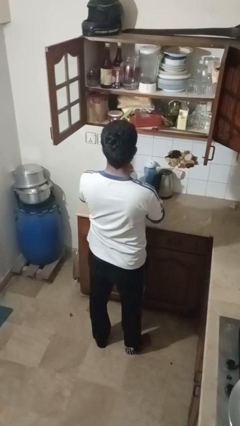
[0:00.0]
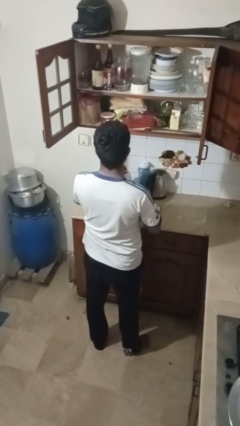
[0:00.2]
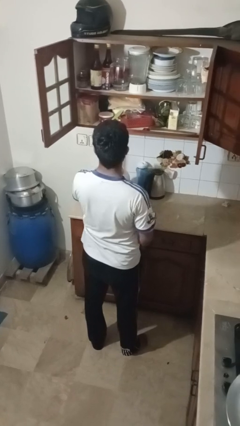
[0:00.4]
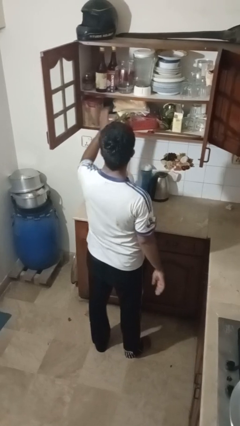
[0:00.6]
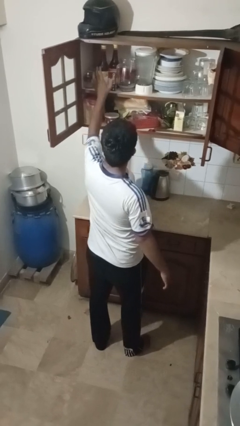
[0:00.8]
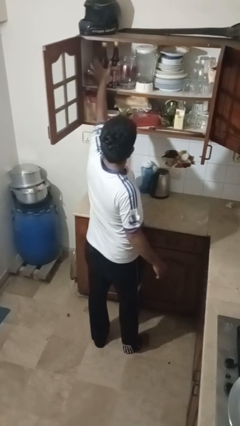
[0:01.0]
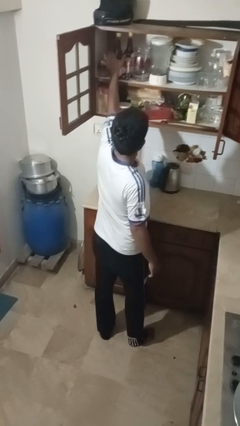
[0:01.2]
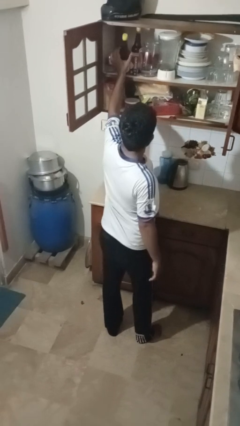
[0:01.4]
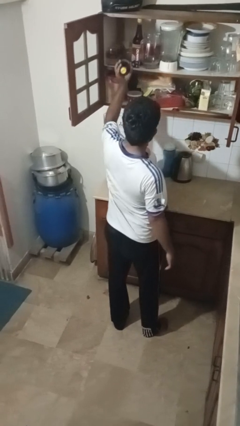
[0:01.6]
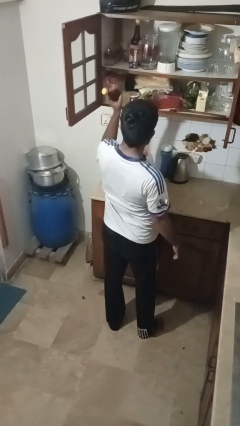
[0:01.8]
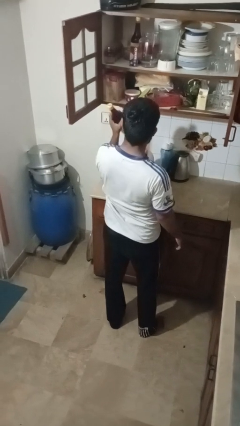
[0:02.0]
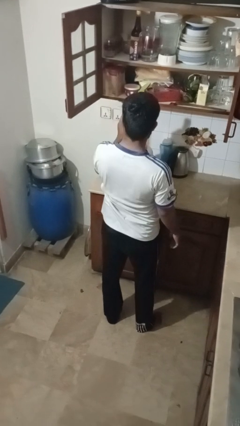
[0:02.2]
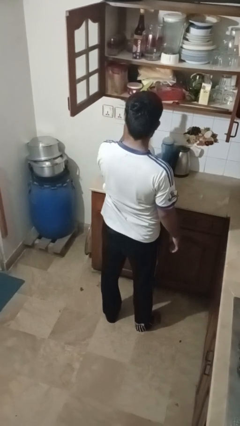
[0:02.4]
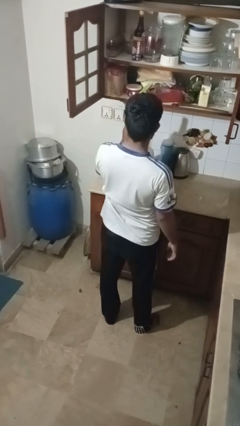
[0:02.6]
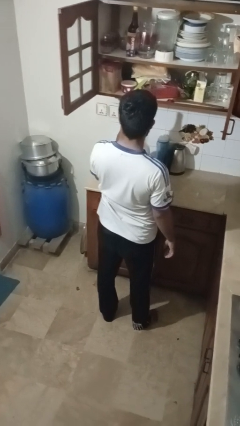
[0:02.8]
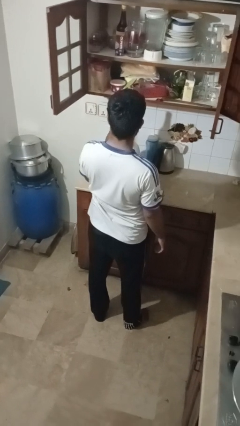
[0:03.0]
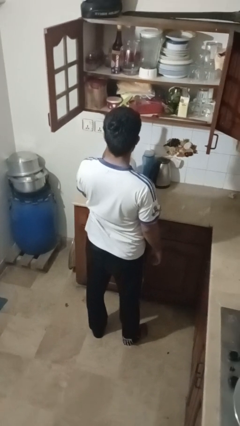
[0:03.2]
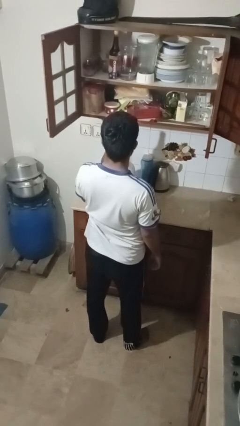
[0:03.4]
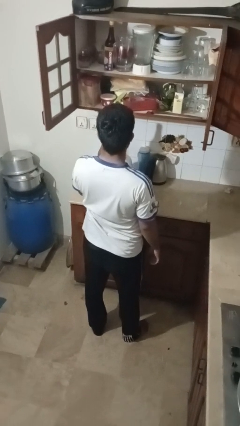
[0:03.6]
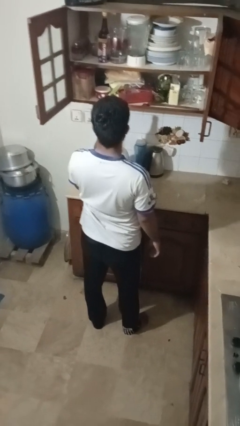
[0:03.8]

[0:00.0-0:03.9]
person takes object from cabinet

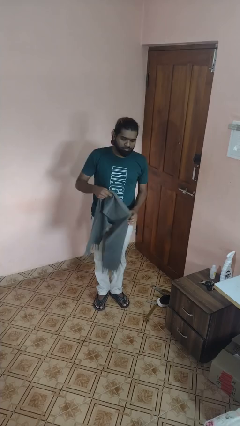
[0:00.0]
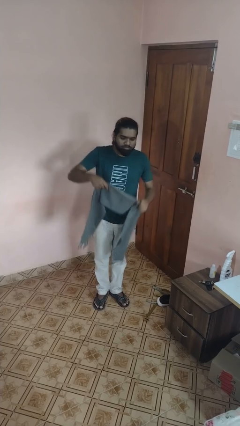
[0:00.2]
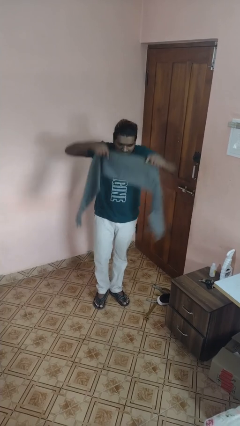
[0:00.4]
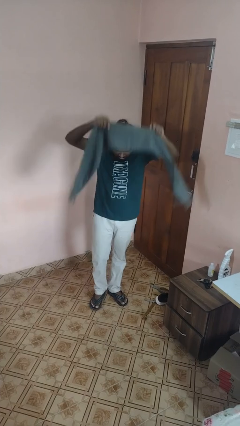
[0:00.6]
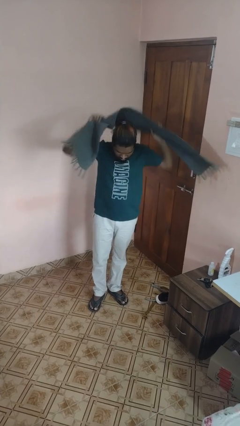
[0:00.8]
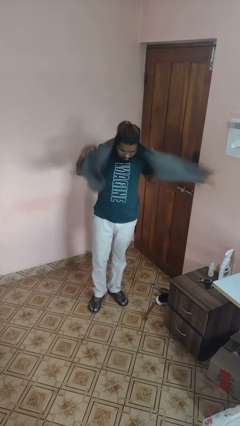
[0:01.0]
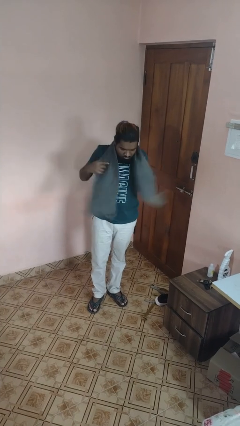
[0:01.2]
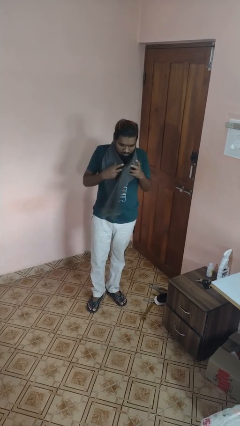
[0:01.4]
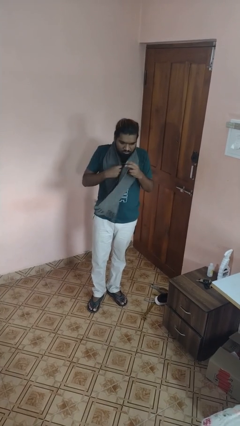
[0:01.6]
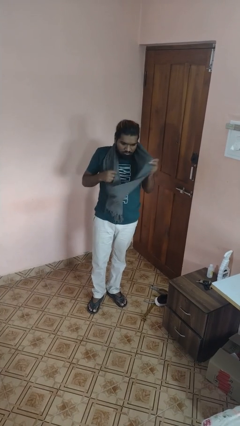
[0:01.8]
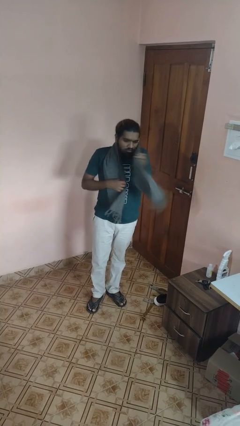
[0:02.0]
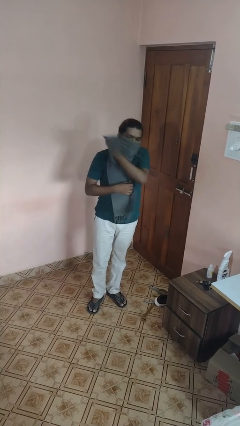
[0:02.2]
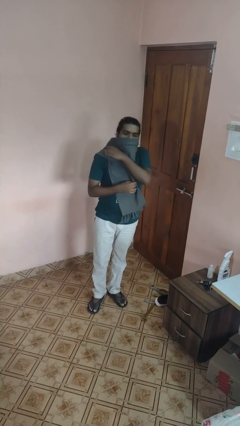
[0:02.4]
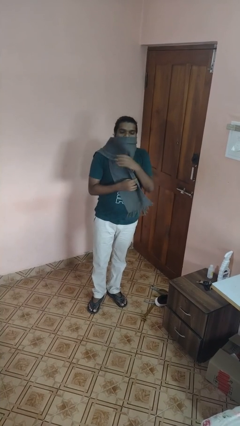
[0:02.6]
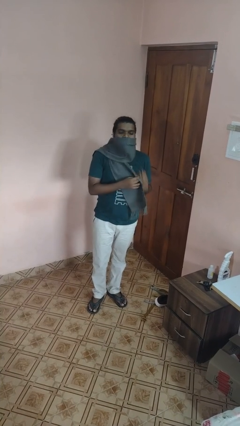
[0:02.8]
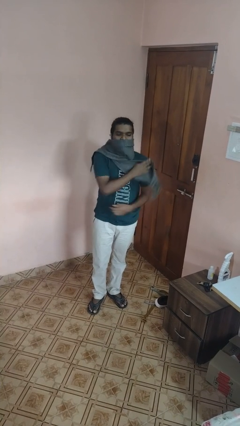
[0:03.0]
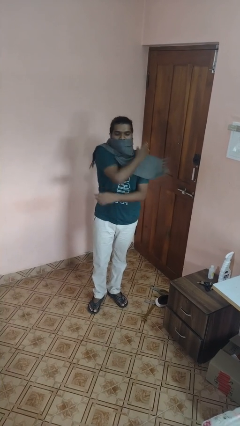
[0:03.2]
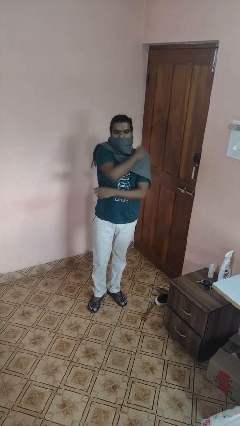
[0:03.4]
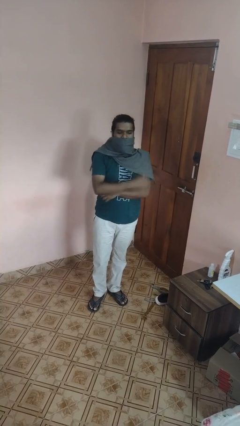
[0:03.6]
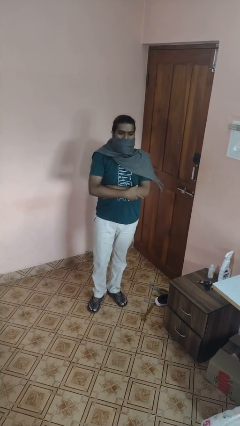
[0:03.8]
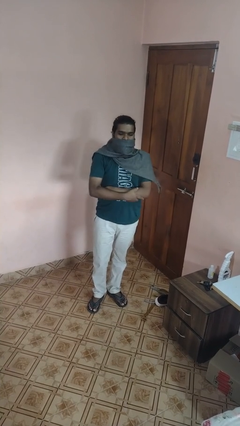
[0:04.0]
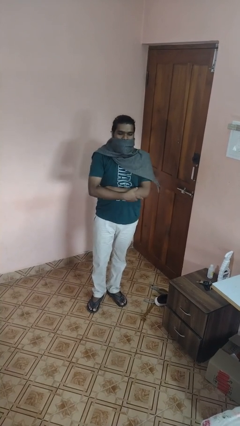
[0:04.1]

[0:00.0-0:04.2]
person puts on scarf

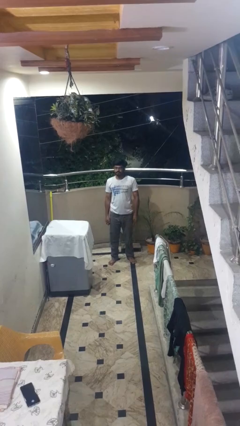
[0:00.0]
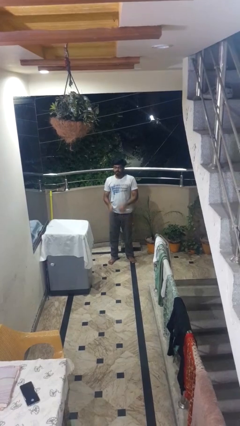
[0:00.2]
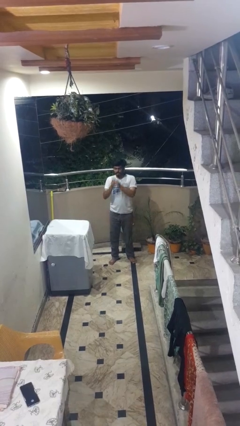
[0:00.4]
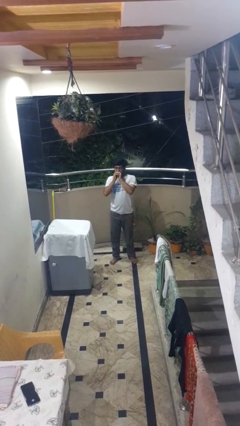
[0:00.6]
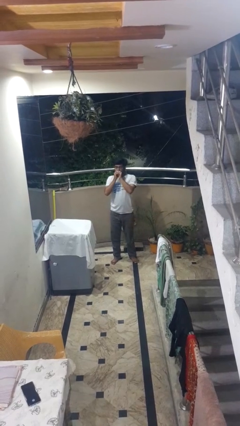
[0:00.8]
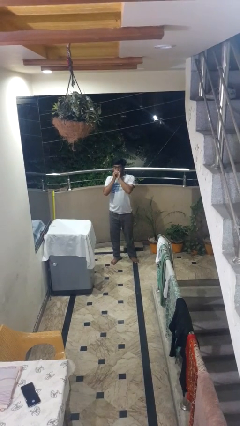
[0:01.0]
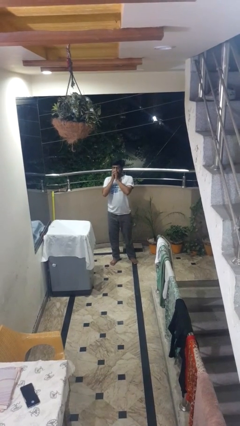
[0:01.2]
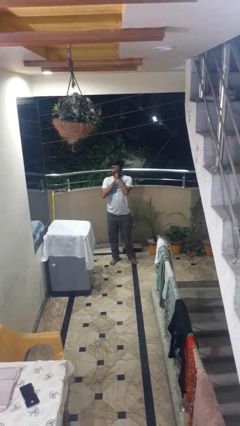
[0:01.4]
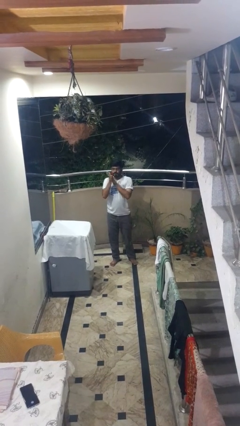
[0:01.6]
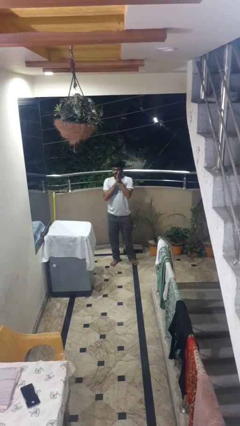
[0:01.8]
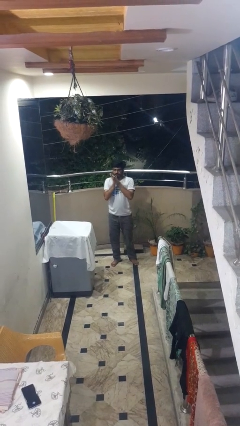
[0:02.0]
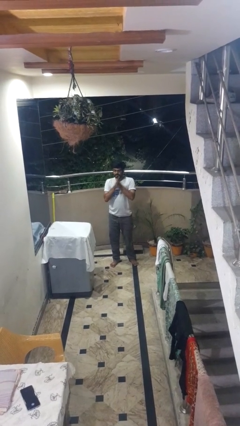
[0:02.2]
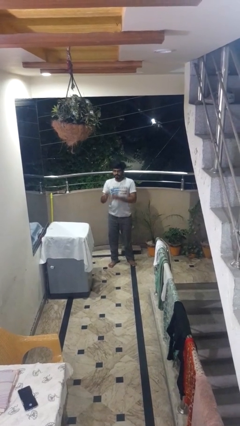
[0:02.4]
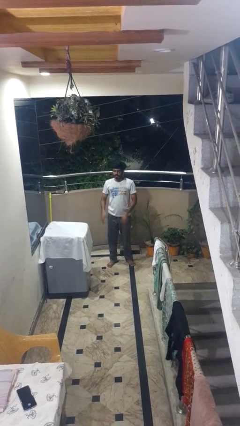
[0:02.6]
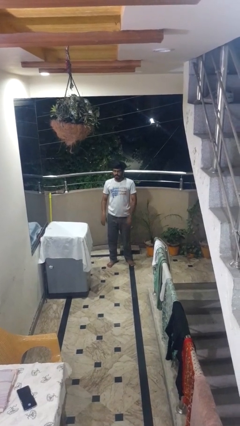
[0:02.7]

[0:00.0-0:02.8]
person blows into hands

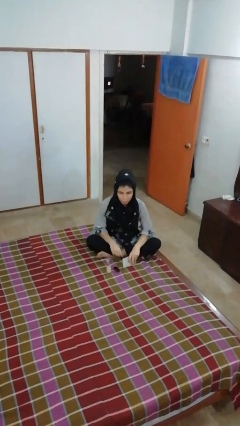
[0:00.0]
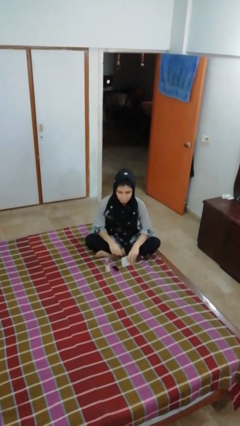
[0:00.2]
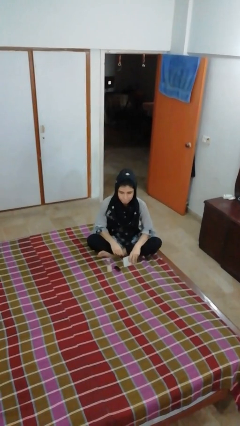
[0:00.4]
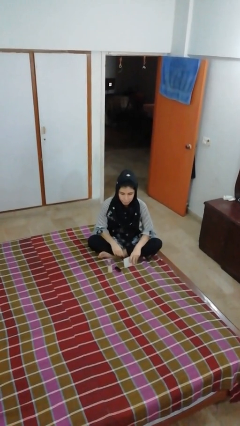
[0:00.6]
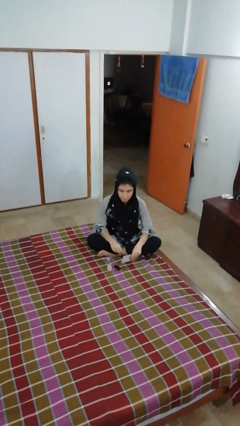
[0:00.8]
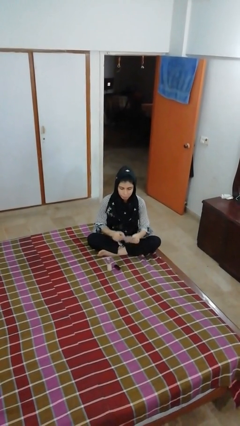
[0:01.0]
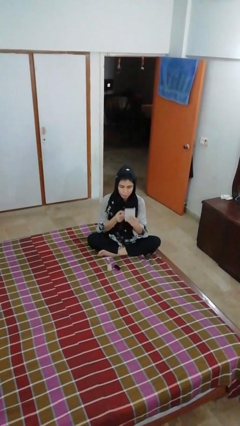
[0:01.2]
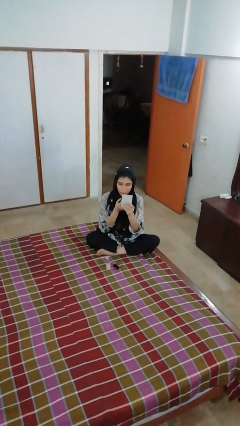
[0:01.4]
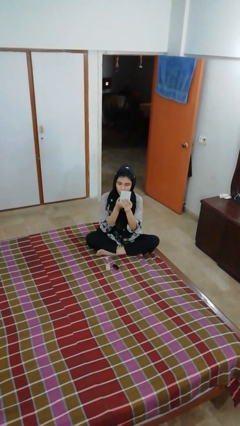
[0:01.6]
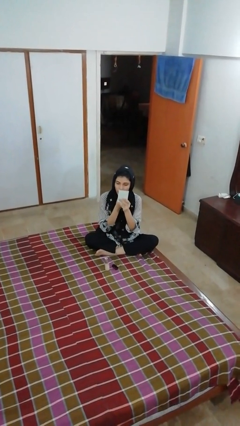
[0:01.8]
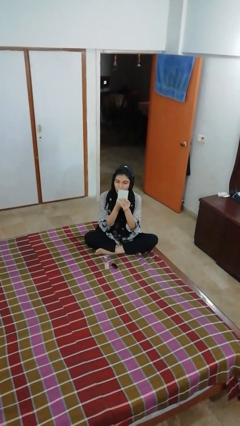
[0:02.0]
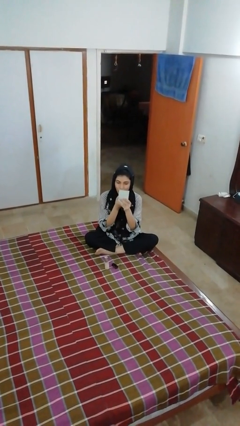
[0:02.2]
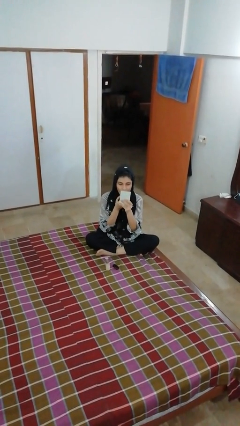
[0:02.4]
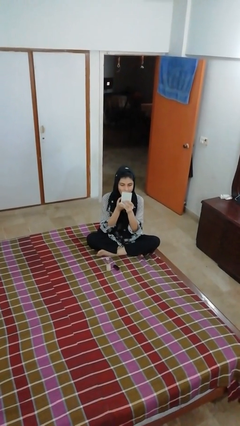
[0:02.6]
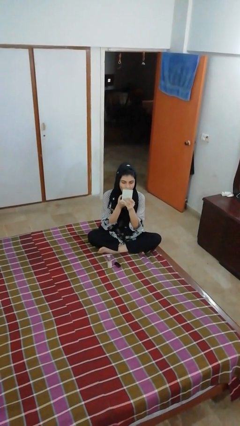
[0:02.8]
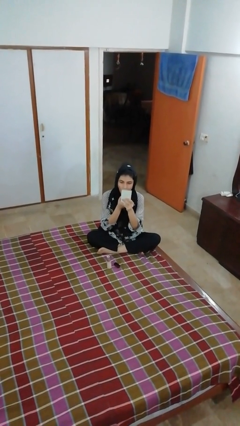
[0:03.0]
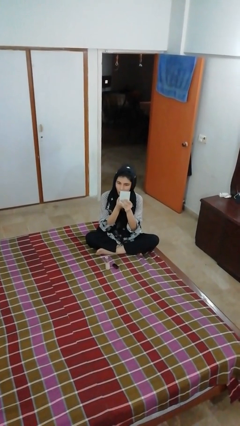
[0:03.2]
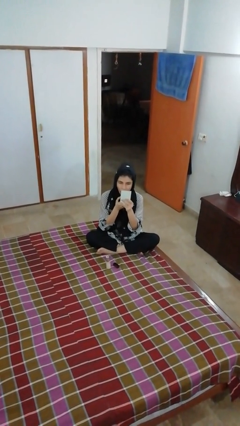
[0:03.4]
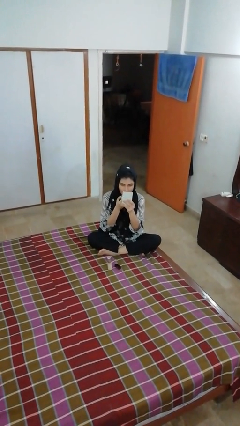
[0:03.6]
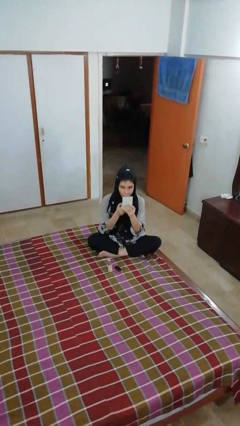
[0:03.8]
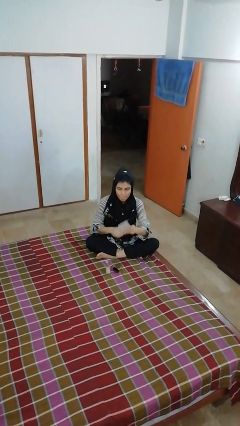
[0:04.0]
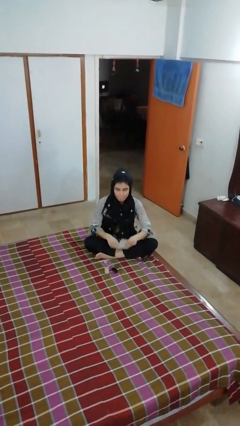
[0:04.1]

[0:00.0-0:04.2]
person applies lip makeup

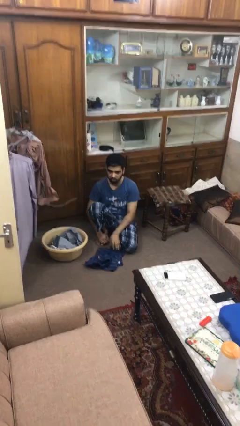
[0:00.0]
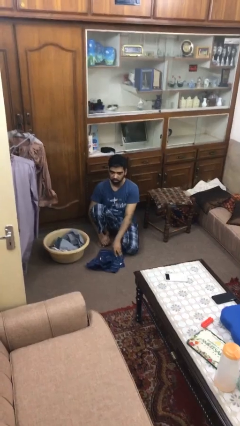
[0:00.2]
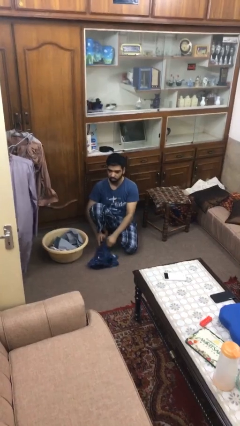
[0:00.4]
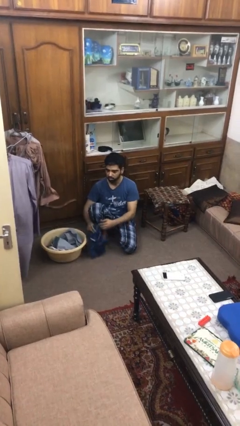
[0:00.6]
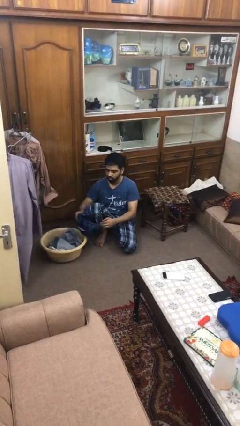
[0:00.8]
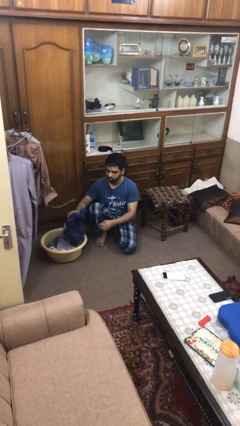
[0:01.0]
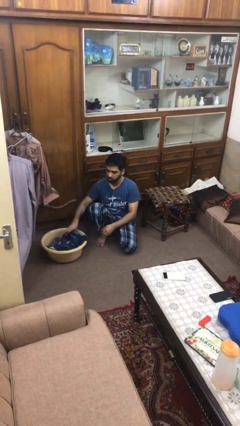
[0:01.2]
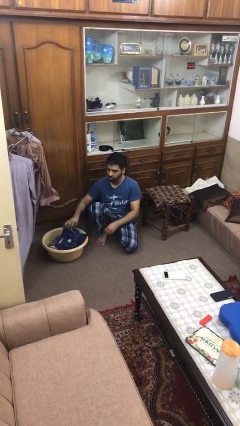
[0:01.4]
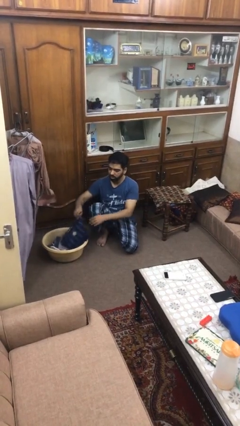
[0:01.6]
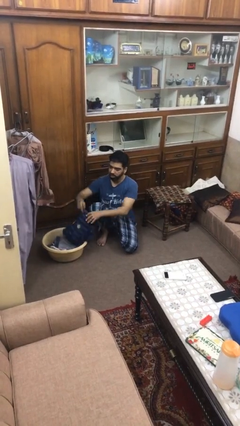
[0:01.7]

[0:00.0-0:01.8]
person folds shirt

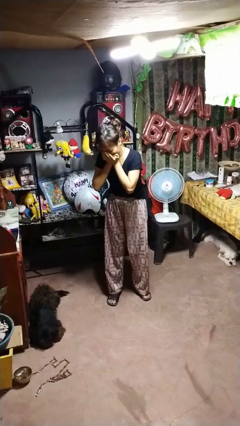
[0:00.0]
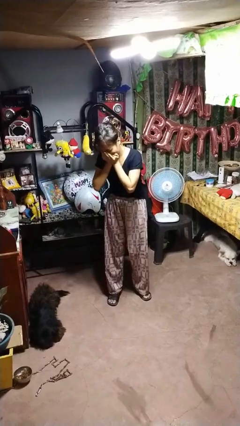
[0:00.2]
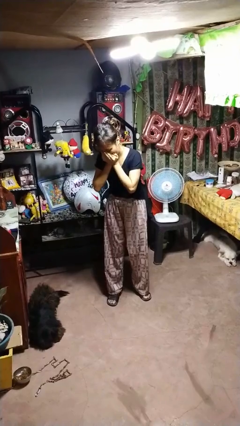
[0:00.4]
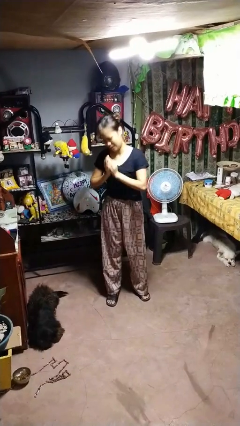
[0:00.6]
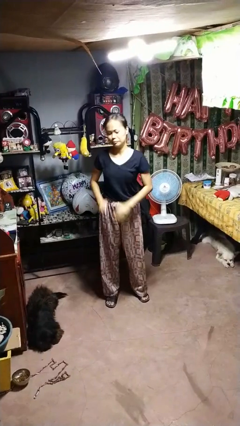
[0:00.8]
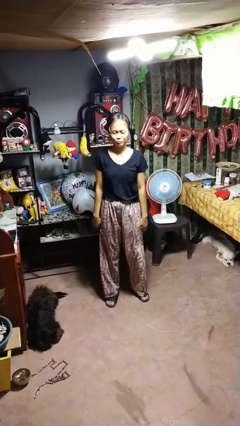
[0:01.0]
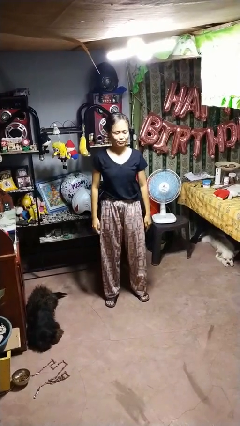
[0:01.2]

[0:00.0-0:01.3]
person sneezes into hand
